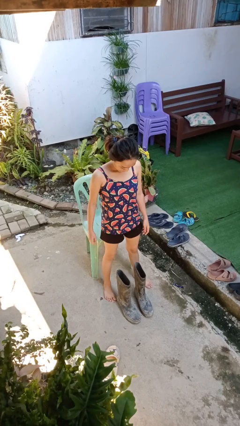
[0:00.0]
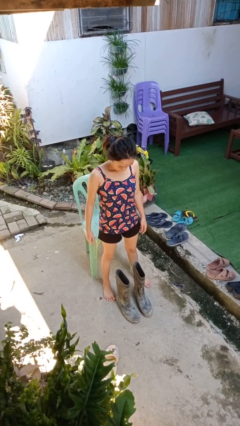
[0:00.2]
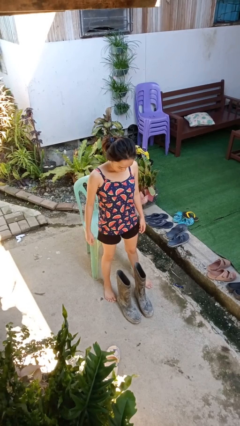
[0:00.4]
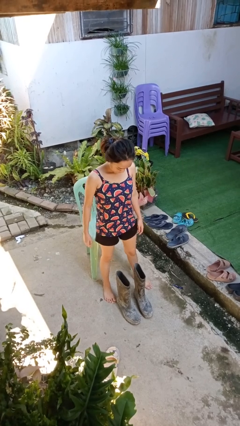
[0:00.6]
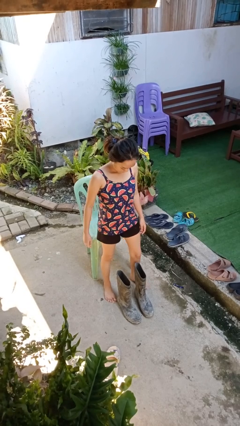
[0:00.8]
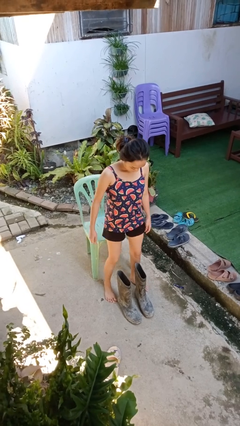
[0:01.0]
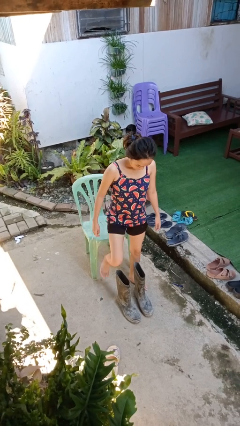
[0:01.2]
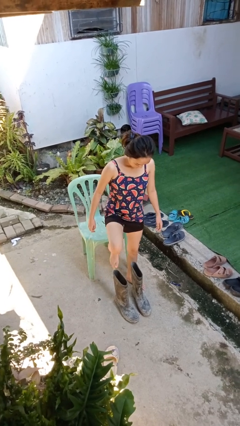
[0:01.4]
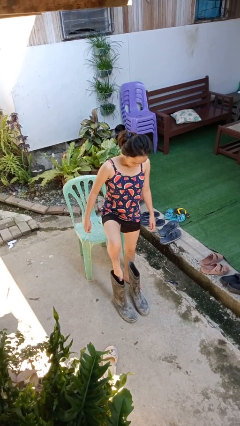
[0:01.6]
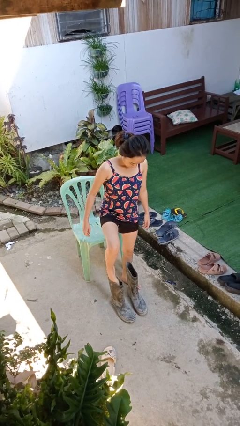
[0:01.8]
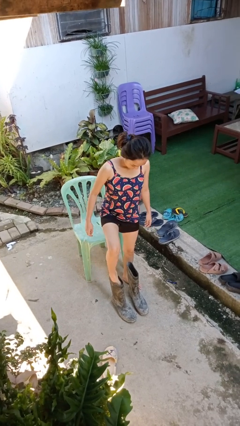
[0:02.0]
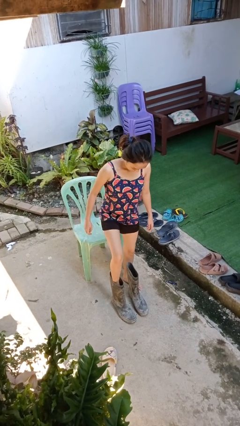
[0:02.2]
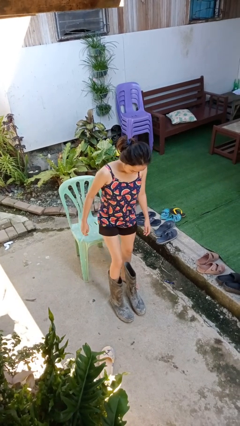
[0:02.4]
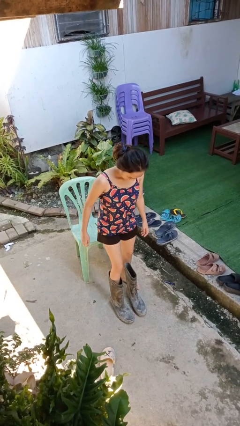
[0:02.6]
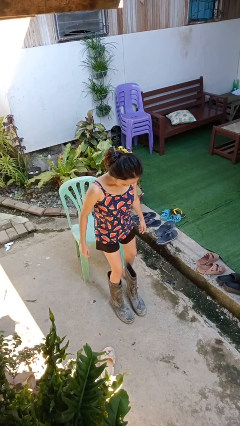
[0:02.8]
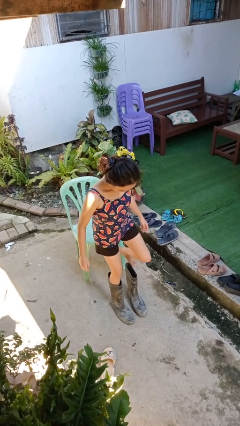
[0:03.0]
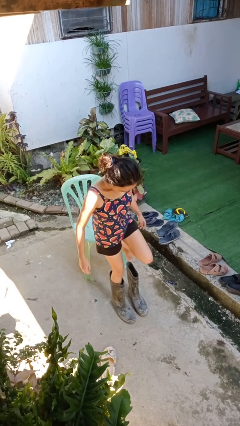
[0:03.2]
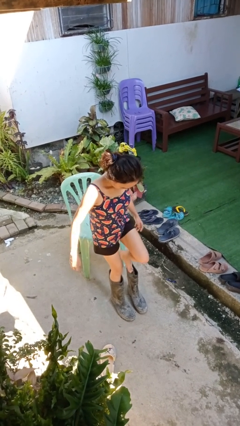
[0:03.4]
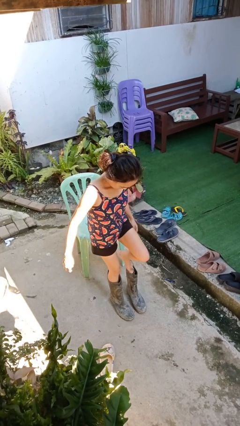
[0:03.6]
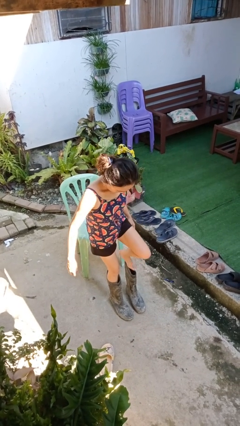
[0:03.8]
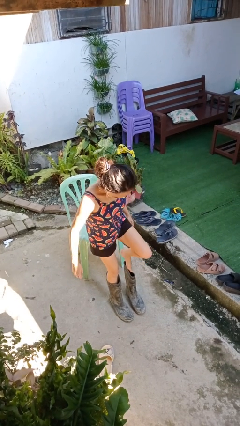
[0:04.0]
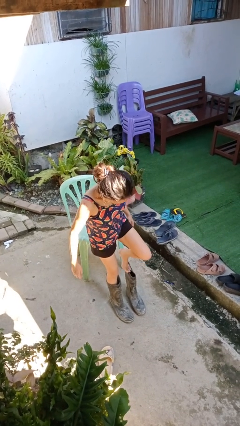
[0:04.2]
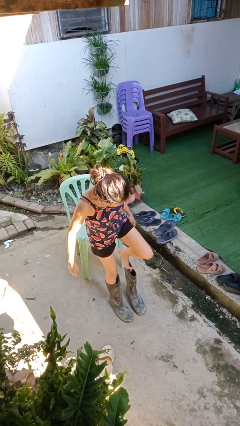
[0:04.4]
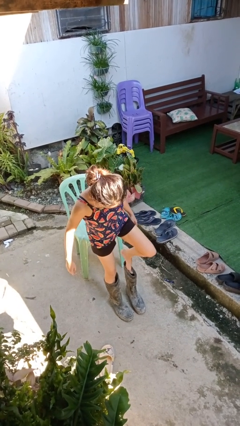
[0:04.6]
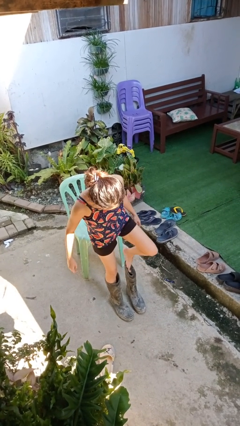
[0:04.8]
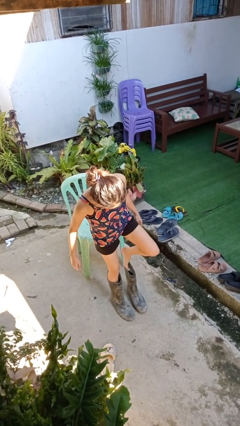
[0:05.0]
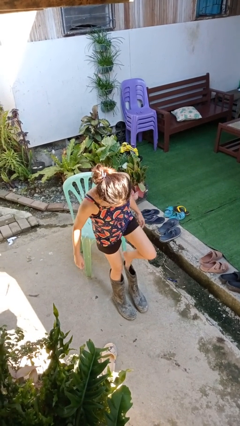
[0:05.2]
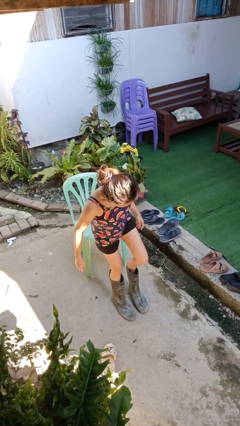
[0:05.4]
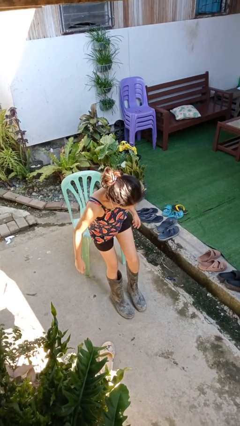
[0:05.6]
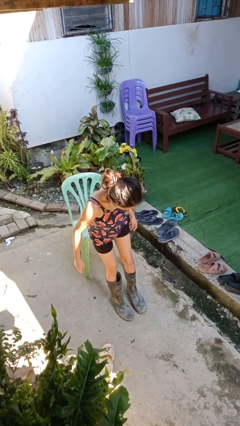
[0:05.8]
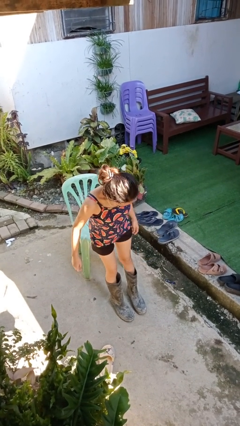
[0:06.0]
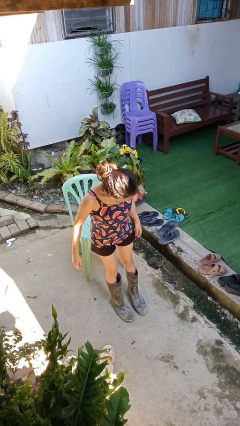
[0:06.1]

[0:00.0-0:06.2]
person puts on boots

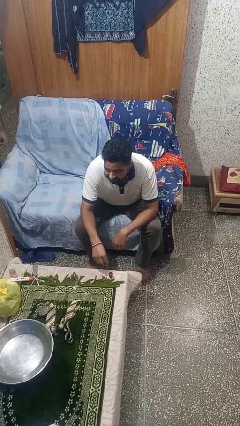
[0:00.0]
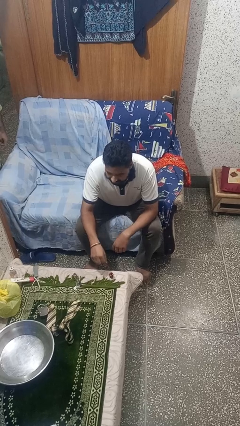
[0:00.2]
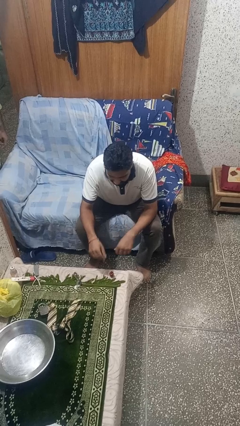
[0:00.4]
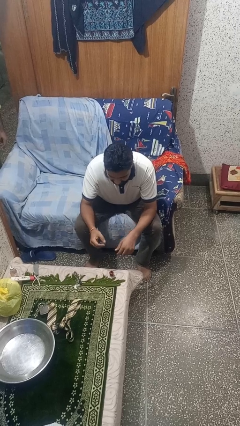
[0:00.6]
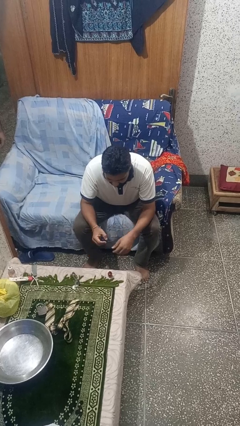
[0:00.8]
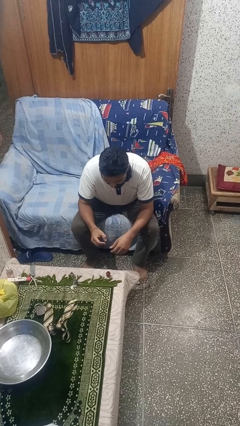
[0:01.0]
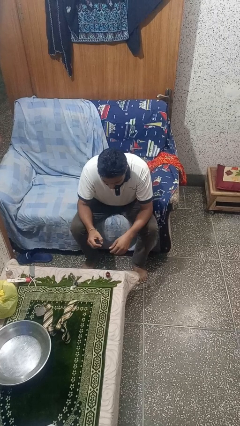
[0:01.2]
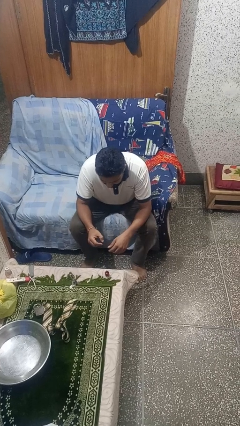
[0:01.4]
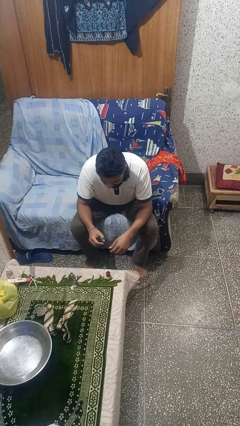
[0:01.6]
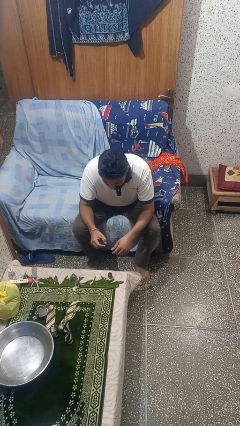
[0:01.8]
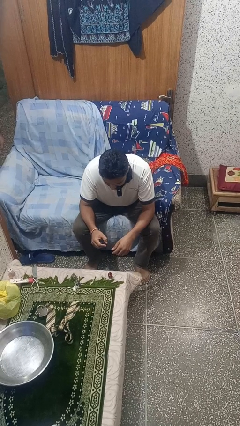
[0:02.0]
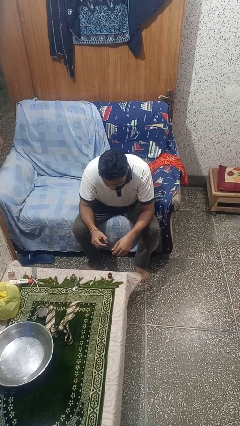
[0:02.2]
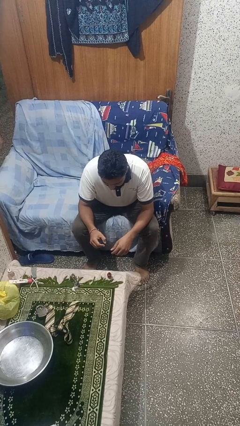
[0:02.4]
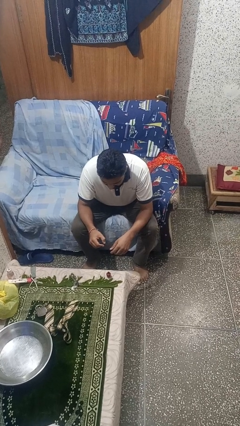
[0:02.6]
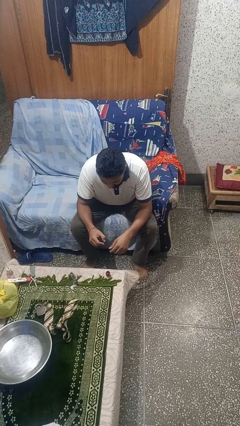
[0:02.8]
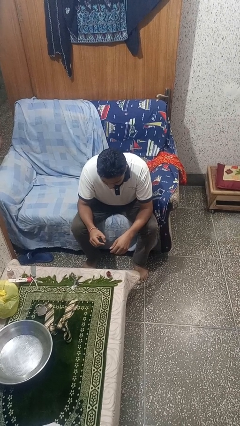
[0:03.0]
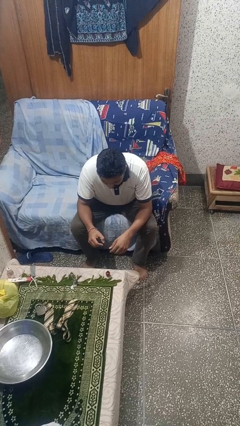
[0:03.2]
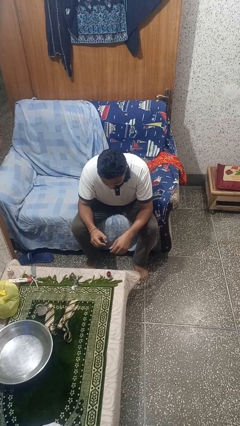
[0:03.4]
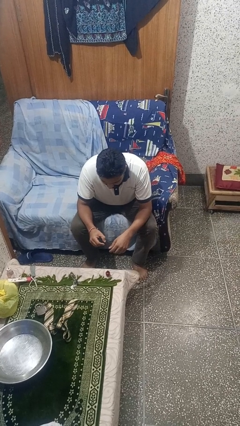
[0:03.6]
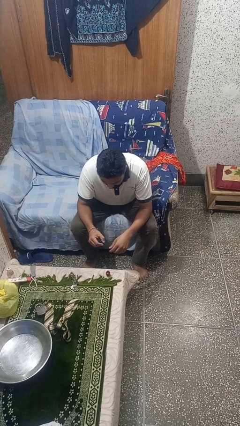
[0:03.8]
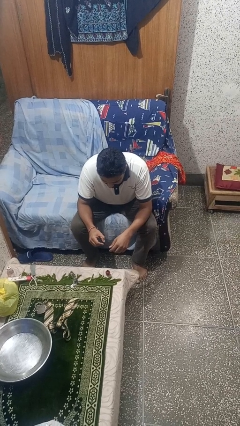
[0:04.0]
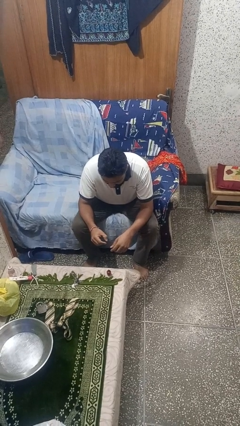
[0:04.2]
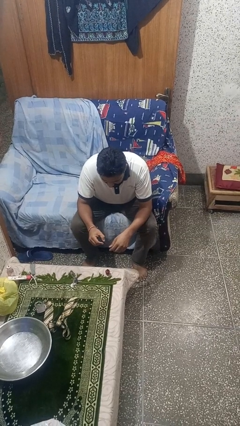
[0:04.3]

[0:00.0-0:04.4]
person paints fingernails

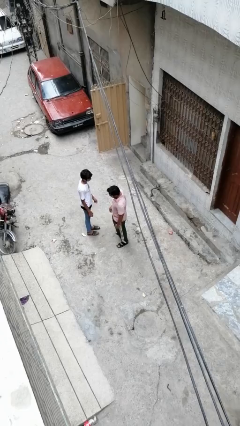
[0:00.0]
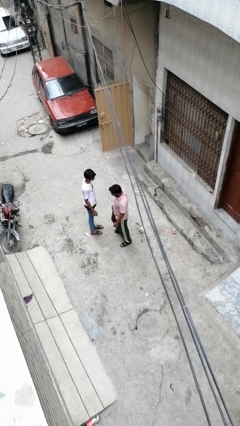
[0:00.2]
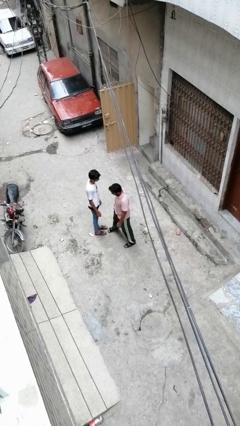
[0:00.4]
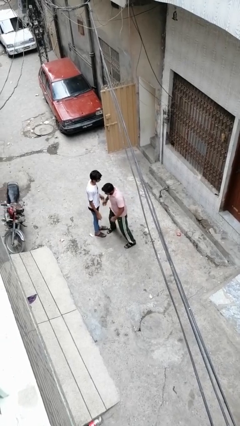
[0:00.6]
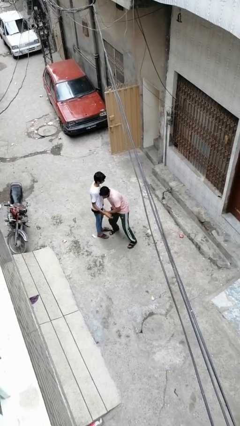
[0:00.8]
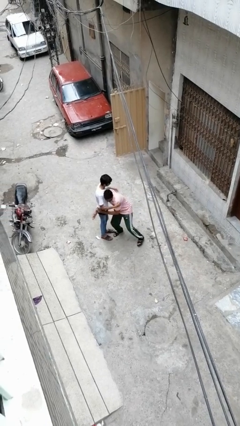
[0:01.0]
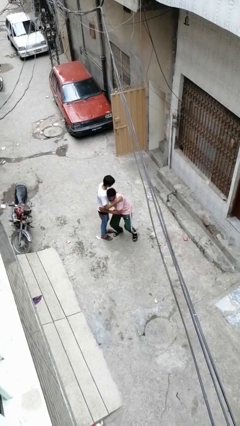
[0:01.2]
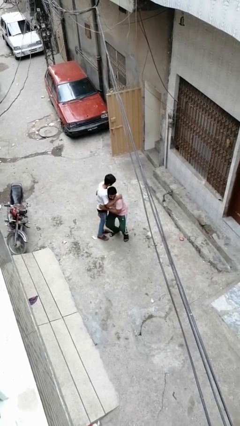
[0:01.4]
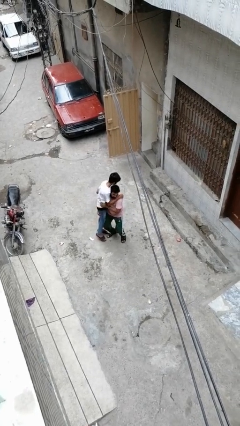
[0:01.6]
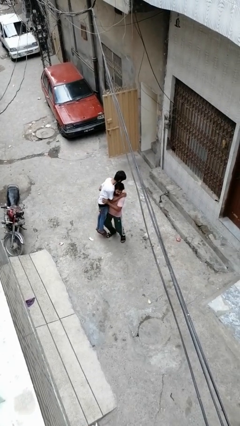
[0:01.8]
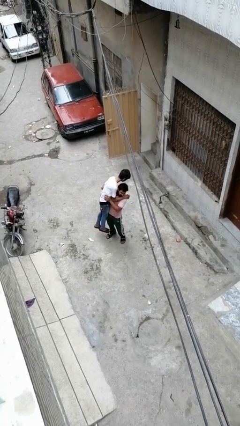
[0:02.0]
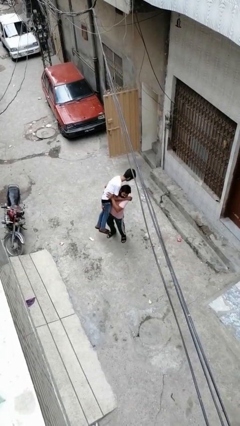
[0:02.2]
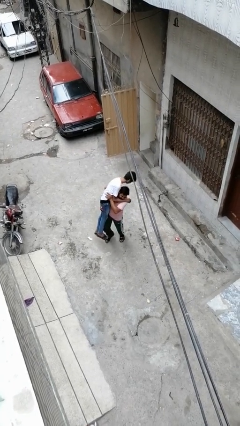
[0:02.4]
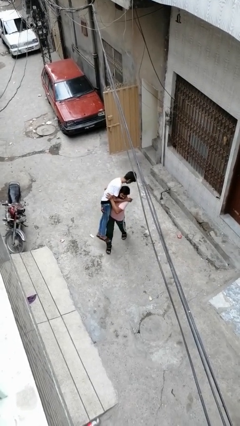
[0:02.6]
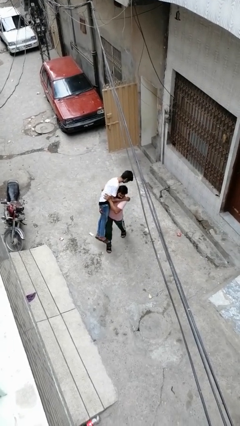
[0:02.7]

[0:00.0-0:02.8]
person picks up person

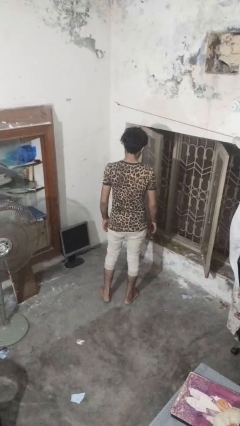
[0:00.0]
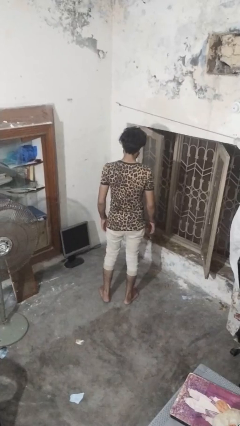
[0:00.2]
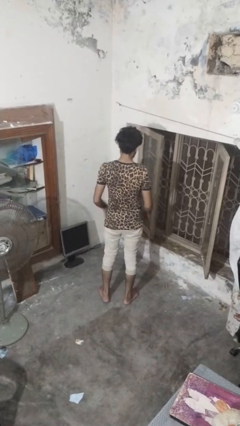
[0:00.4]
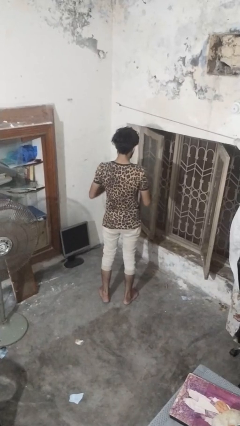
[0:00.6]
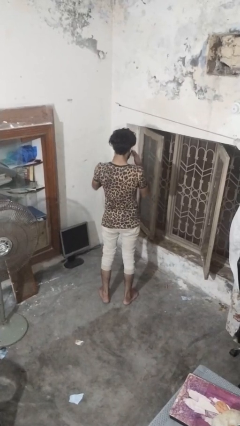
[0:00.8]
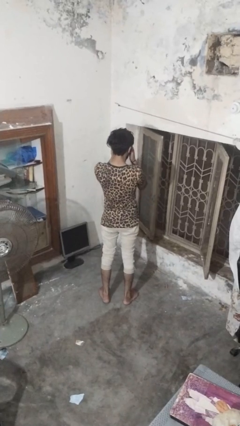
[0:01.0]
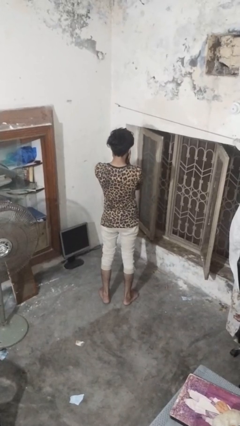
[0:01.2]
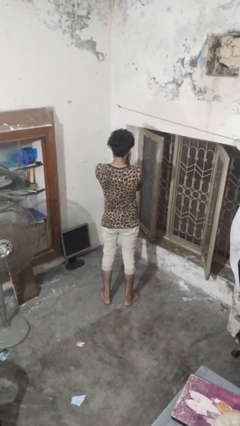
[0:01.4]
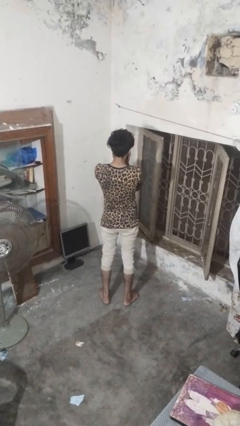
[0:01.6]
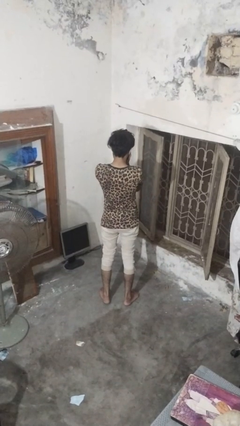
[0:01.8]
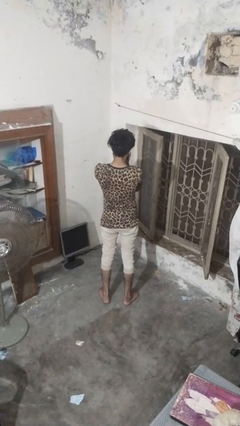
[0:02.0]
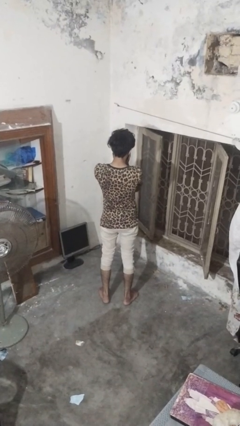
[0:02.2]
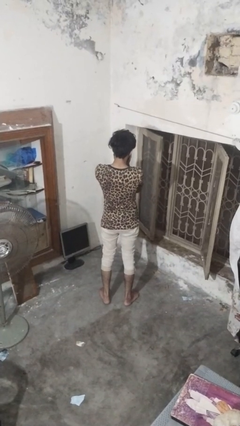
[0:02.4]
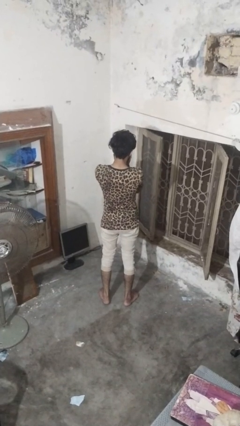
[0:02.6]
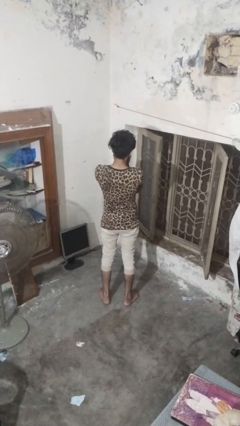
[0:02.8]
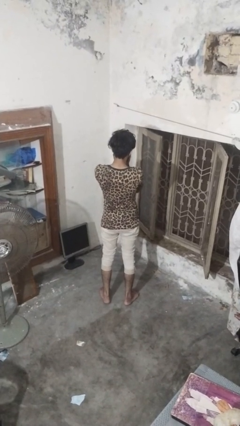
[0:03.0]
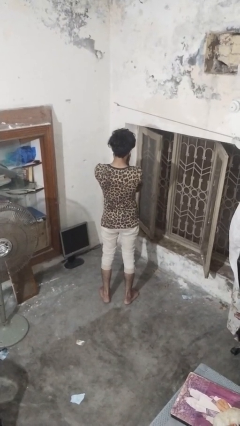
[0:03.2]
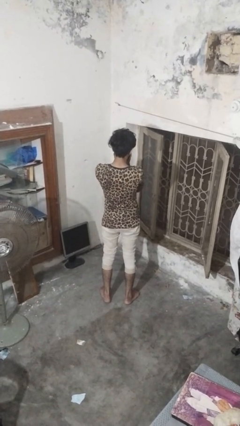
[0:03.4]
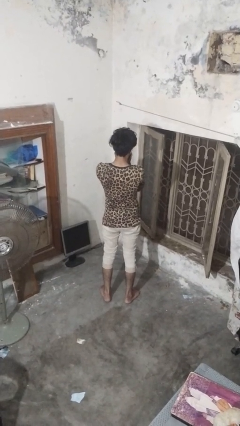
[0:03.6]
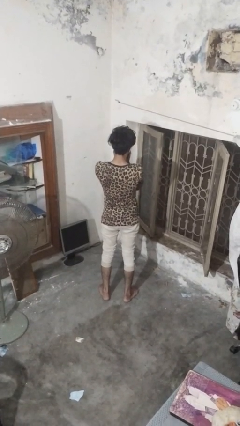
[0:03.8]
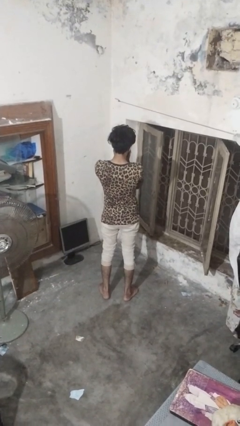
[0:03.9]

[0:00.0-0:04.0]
person covers face with hands
